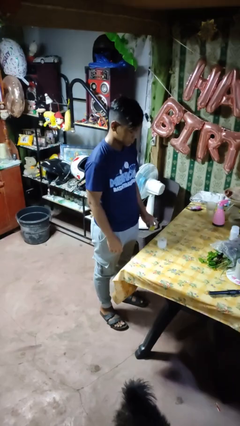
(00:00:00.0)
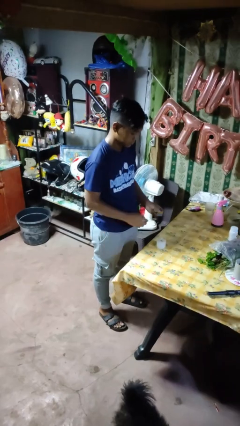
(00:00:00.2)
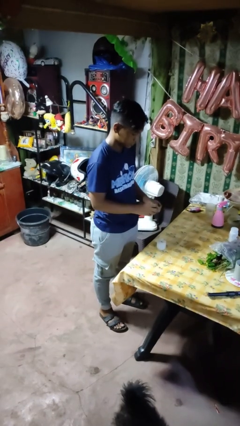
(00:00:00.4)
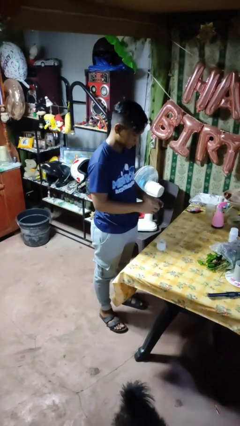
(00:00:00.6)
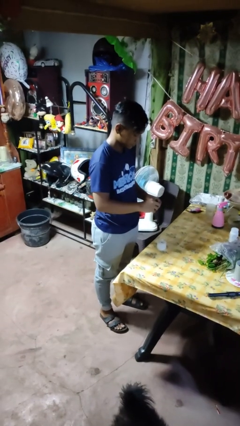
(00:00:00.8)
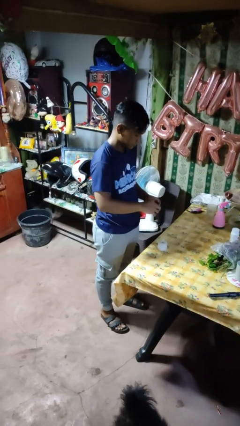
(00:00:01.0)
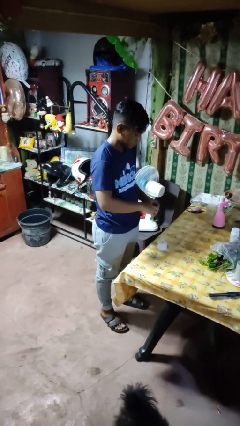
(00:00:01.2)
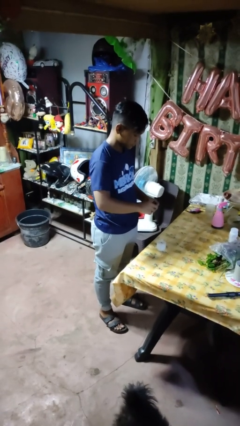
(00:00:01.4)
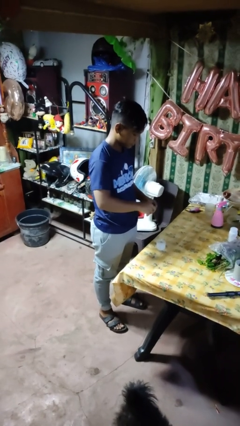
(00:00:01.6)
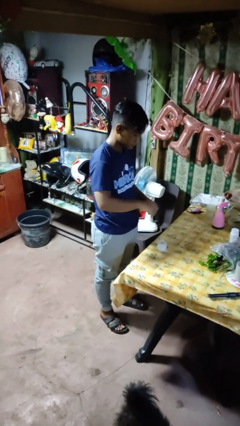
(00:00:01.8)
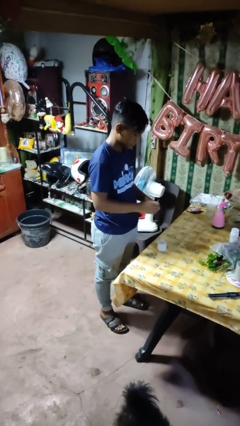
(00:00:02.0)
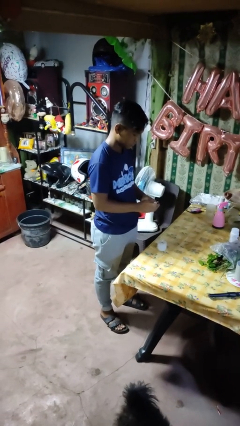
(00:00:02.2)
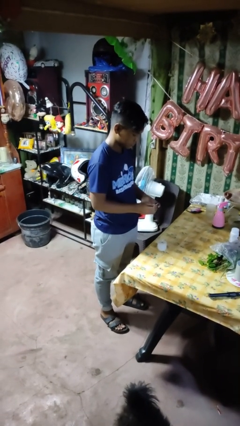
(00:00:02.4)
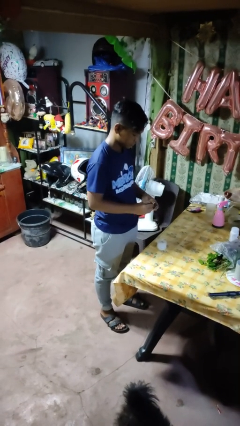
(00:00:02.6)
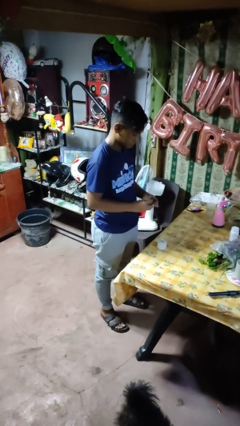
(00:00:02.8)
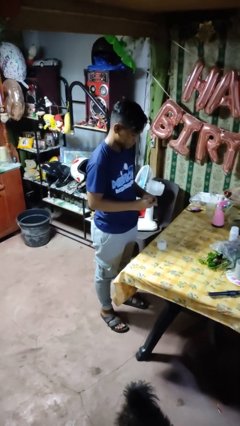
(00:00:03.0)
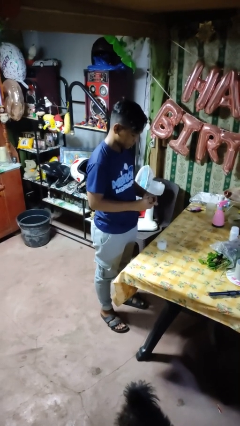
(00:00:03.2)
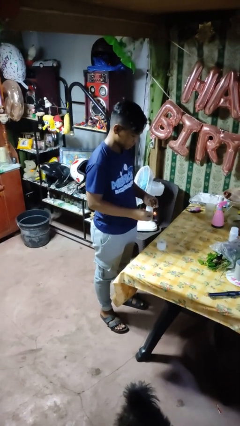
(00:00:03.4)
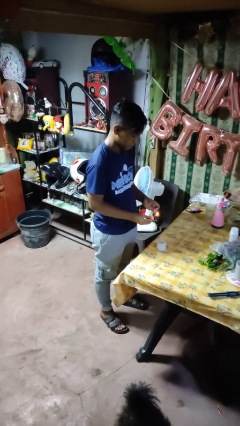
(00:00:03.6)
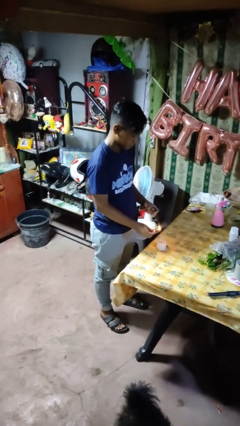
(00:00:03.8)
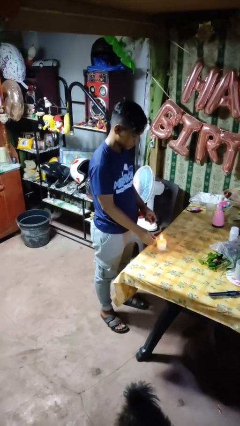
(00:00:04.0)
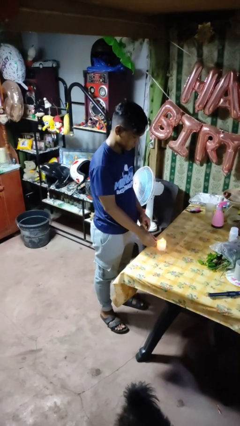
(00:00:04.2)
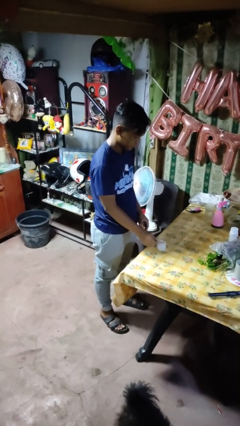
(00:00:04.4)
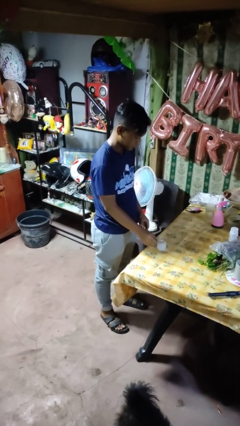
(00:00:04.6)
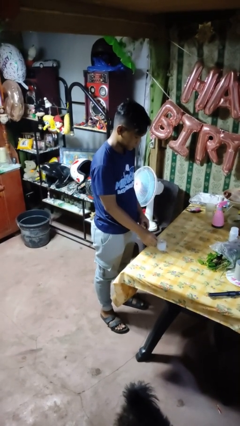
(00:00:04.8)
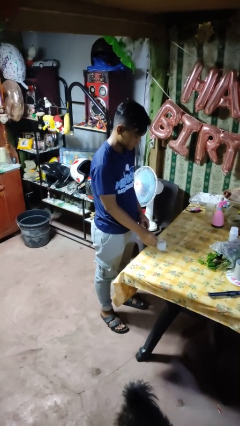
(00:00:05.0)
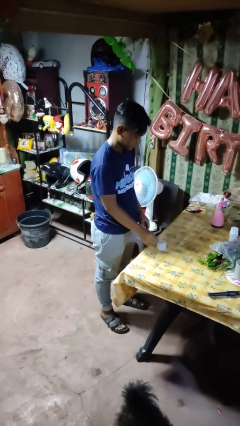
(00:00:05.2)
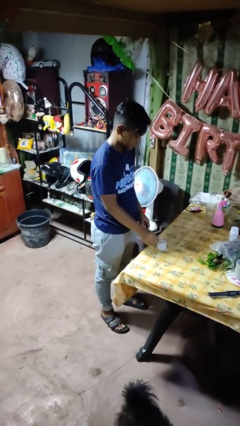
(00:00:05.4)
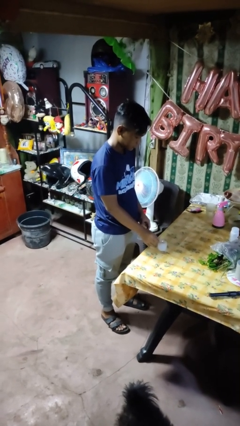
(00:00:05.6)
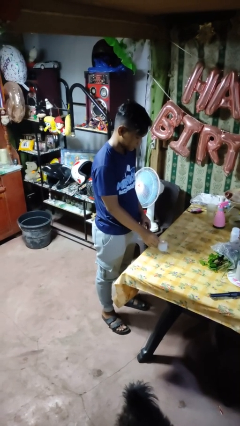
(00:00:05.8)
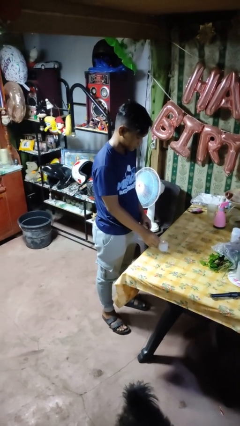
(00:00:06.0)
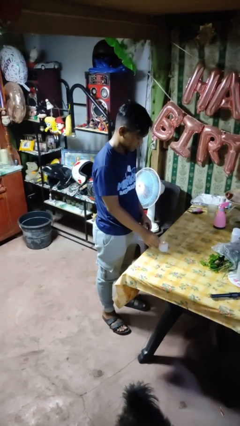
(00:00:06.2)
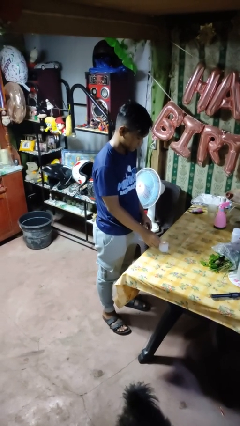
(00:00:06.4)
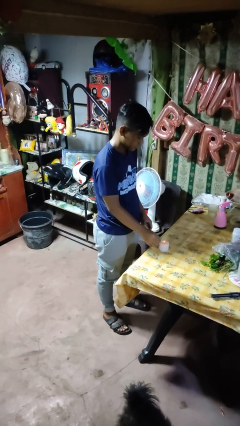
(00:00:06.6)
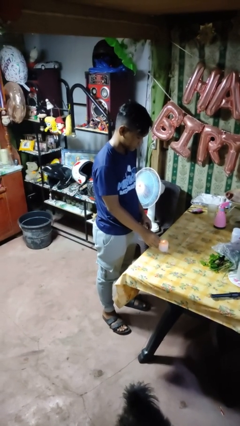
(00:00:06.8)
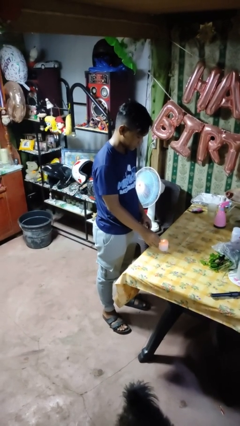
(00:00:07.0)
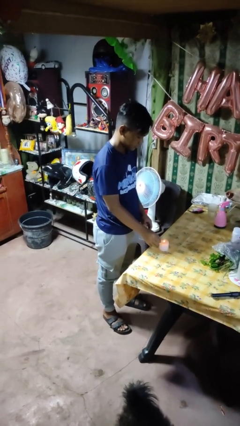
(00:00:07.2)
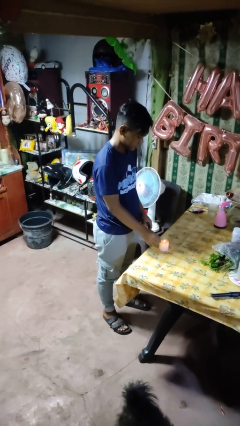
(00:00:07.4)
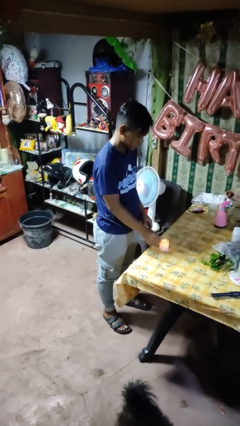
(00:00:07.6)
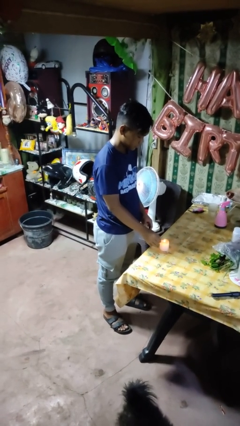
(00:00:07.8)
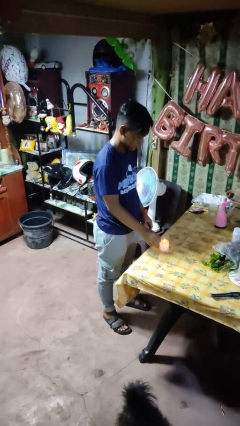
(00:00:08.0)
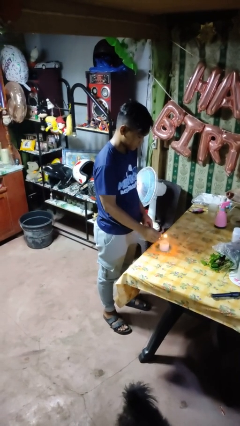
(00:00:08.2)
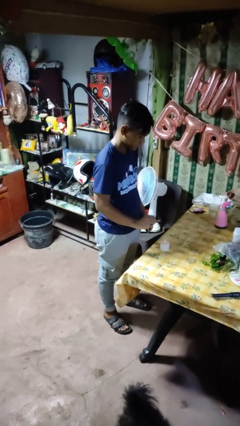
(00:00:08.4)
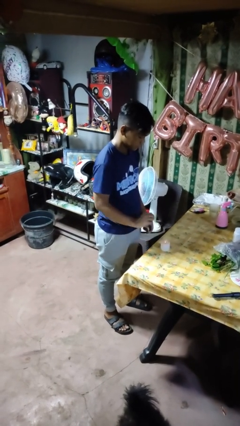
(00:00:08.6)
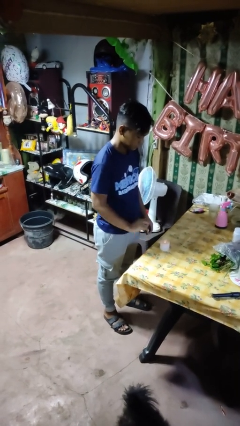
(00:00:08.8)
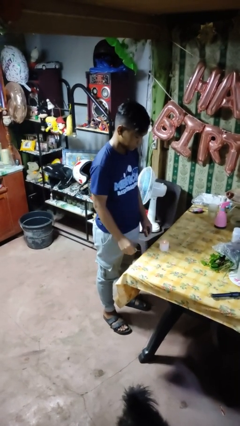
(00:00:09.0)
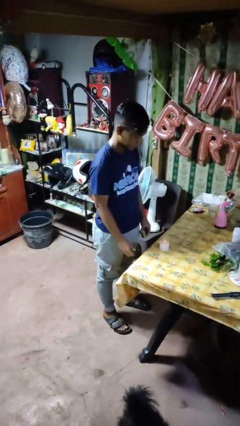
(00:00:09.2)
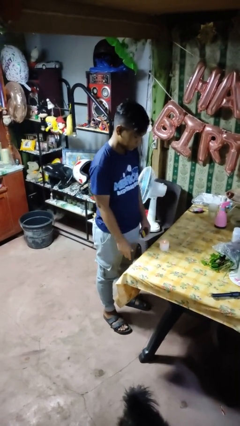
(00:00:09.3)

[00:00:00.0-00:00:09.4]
person lights candle

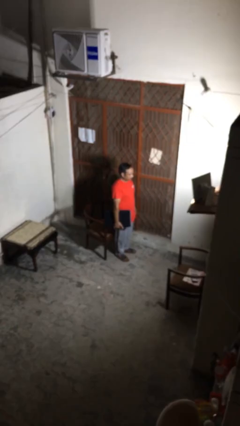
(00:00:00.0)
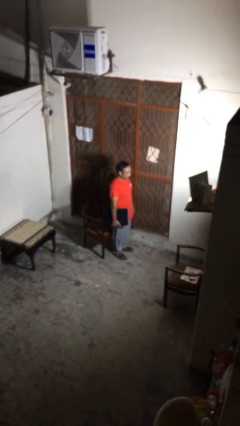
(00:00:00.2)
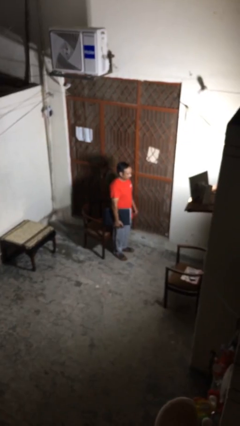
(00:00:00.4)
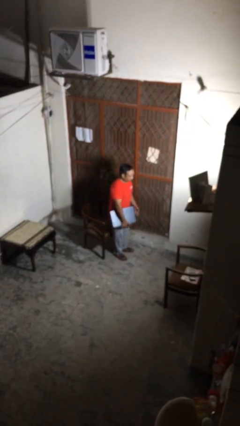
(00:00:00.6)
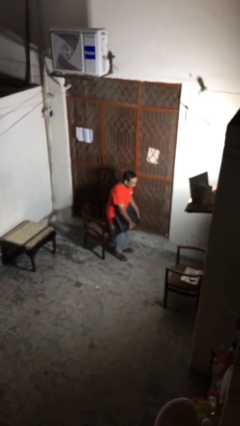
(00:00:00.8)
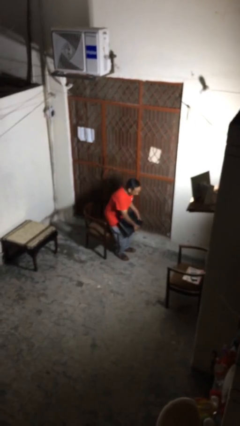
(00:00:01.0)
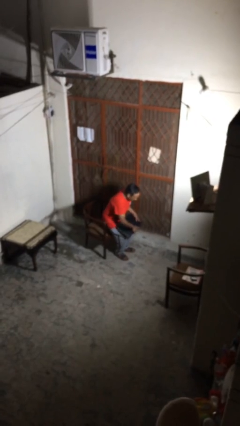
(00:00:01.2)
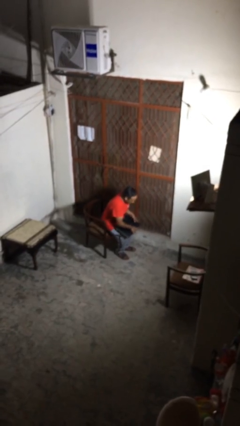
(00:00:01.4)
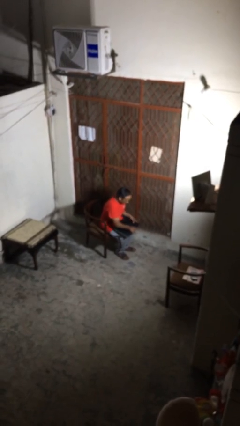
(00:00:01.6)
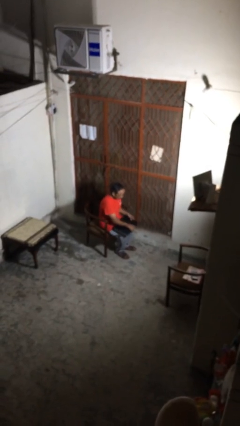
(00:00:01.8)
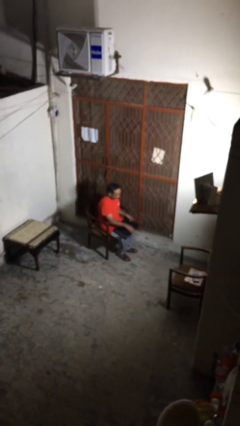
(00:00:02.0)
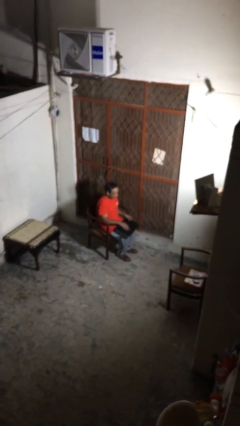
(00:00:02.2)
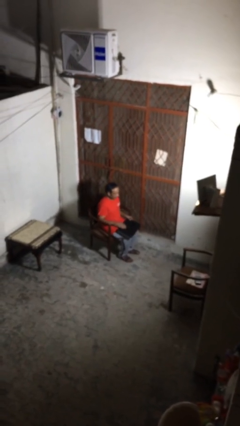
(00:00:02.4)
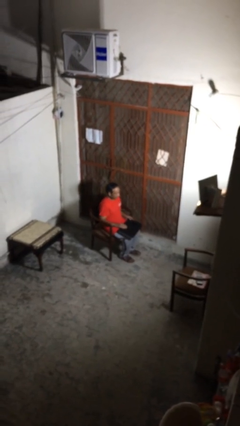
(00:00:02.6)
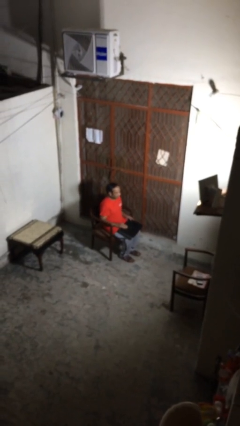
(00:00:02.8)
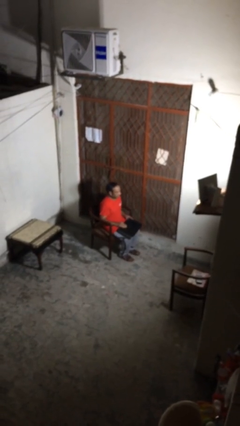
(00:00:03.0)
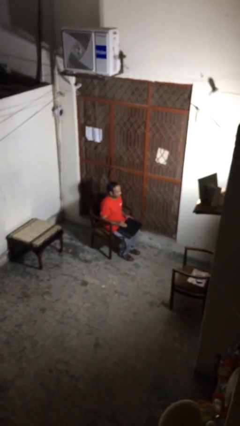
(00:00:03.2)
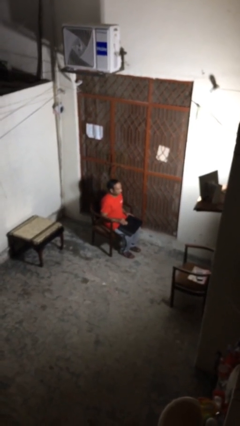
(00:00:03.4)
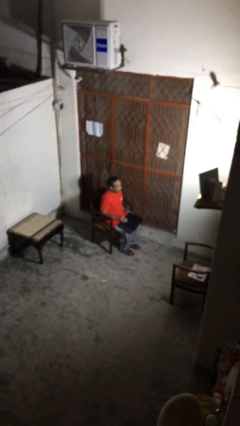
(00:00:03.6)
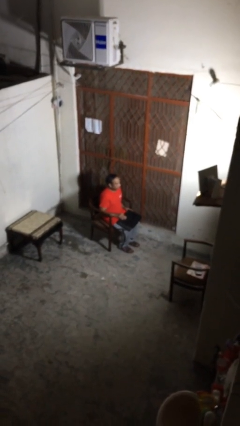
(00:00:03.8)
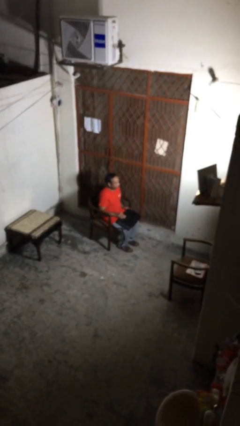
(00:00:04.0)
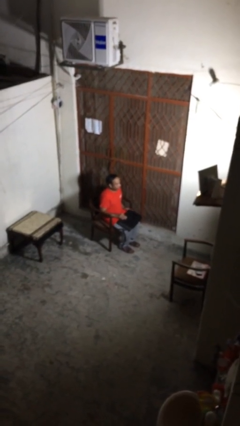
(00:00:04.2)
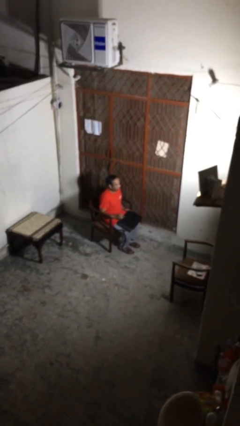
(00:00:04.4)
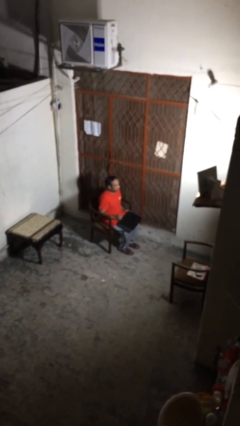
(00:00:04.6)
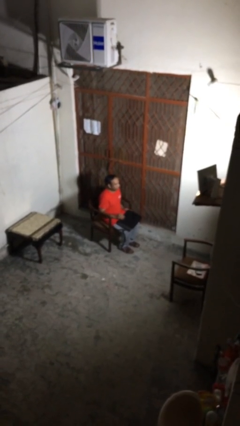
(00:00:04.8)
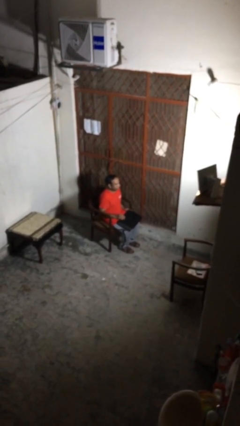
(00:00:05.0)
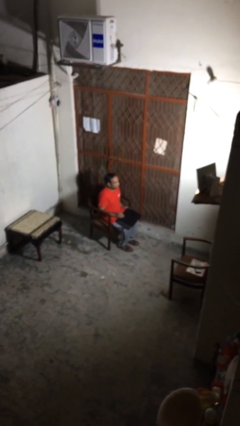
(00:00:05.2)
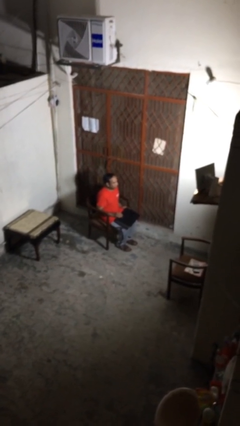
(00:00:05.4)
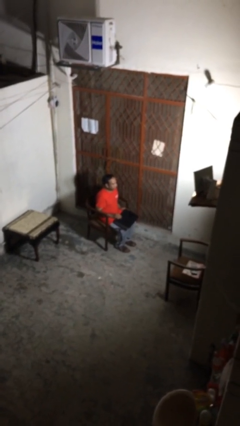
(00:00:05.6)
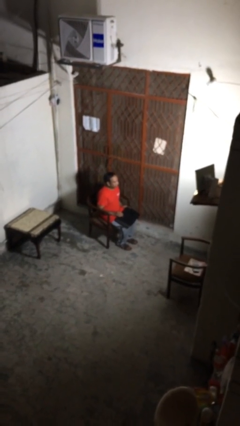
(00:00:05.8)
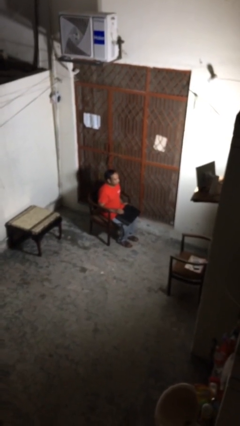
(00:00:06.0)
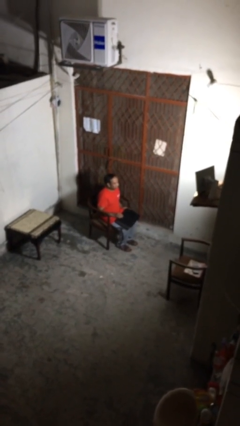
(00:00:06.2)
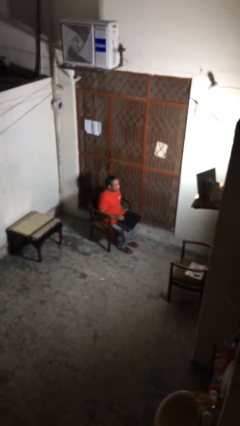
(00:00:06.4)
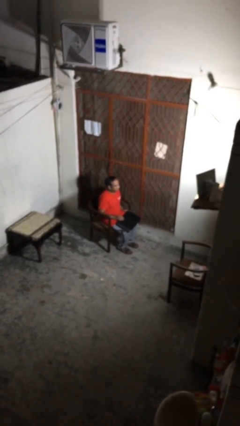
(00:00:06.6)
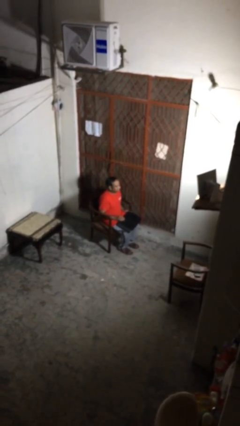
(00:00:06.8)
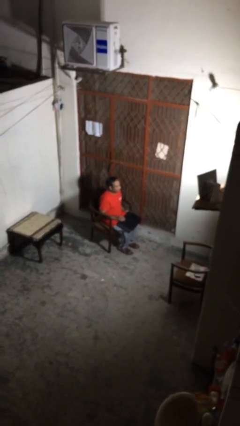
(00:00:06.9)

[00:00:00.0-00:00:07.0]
person sits down

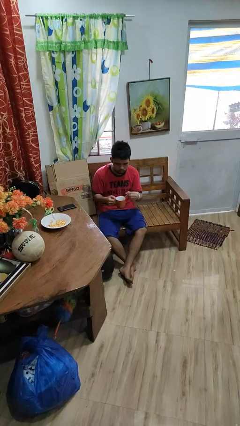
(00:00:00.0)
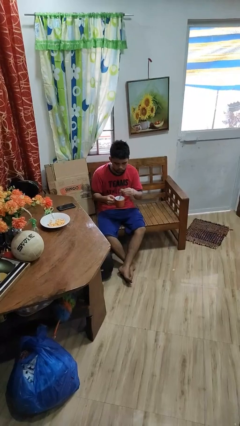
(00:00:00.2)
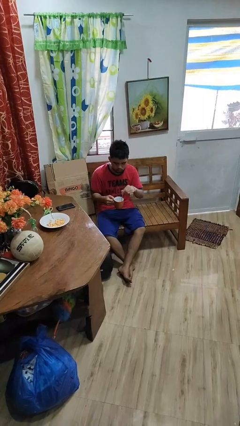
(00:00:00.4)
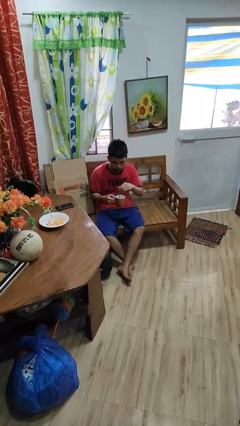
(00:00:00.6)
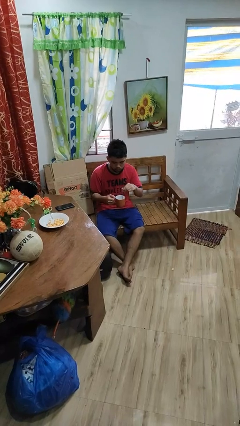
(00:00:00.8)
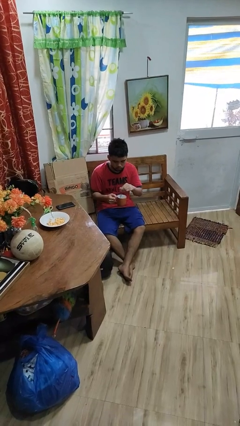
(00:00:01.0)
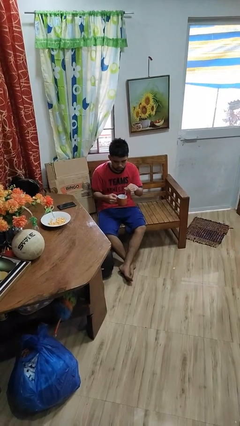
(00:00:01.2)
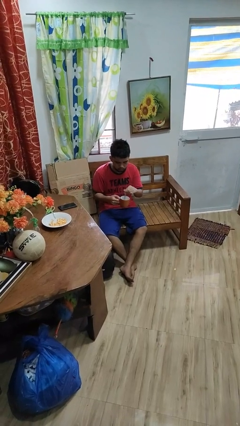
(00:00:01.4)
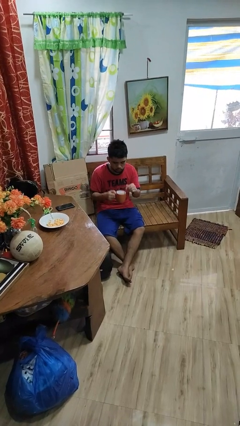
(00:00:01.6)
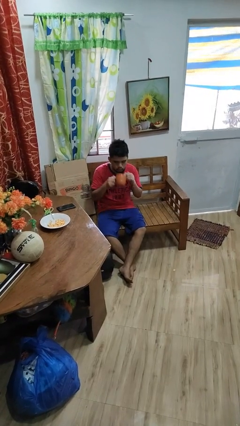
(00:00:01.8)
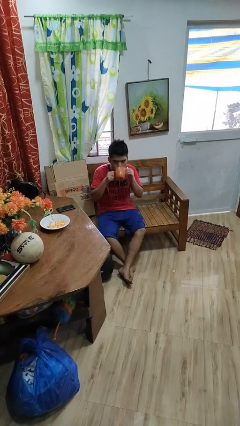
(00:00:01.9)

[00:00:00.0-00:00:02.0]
person stirs mug
